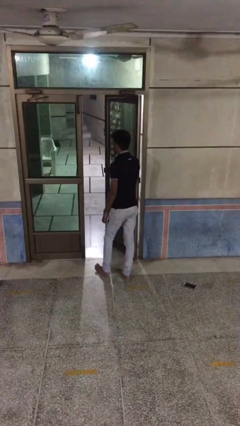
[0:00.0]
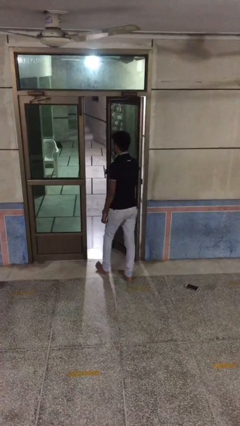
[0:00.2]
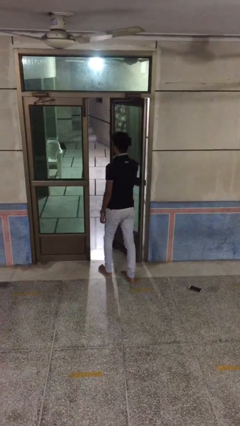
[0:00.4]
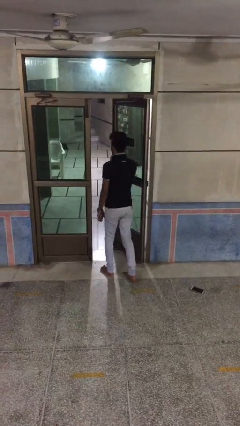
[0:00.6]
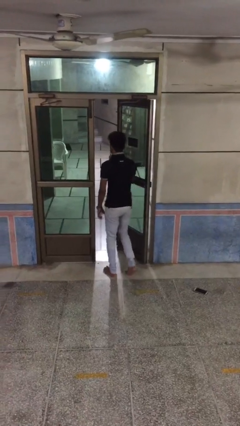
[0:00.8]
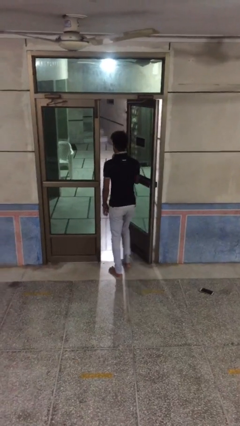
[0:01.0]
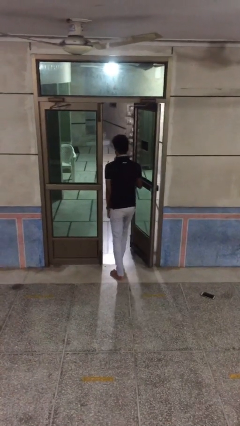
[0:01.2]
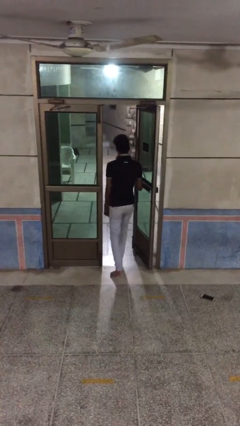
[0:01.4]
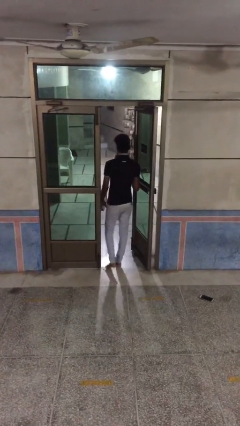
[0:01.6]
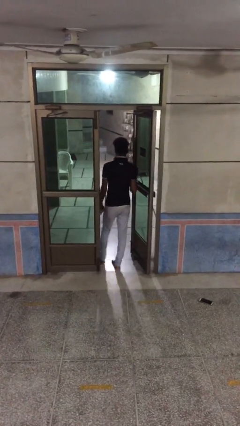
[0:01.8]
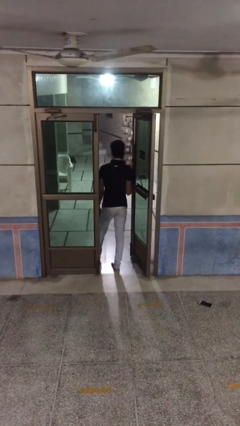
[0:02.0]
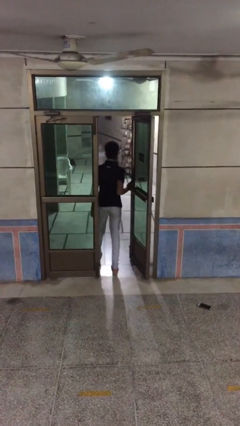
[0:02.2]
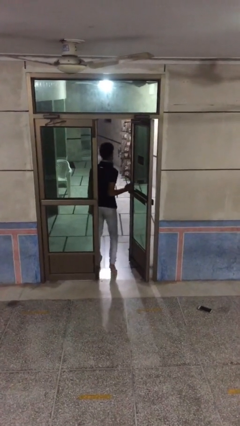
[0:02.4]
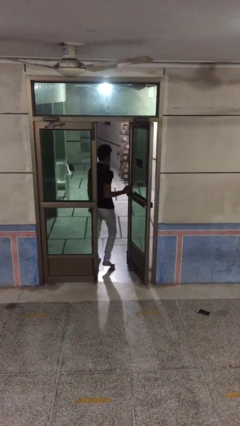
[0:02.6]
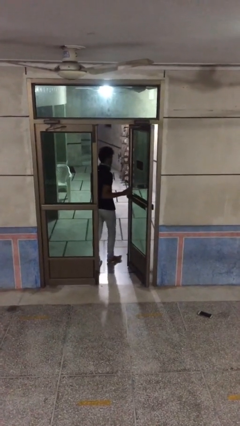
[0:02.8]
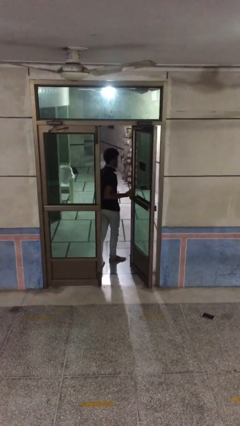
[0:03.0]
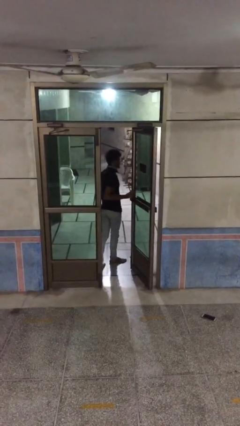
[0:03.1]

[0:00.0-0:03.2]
person exits scene through structure

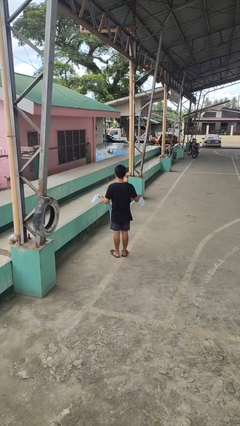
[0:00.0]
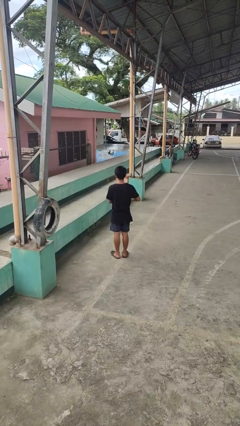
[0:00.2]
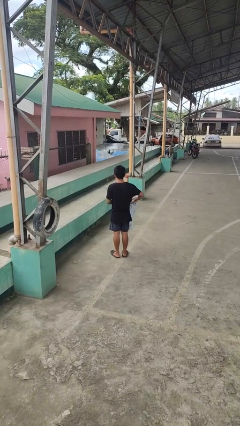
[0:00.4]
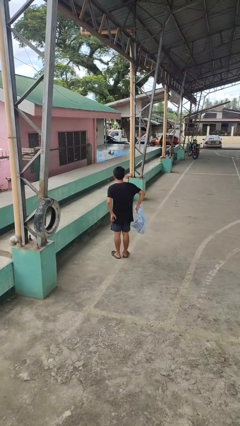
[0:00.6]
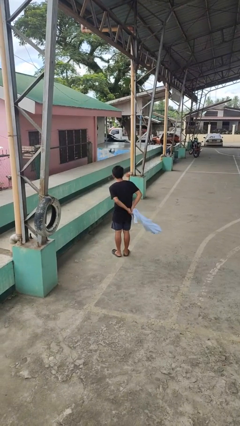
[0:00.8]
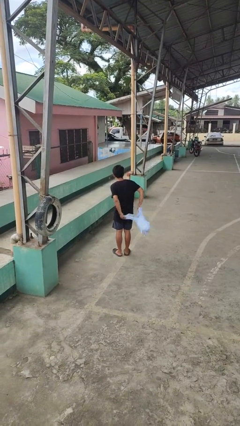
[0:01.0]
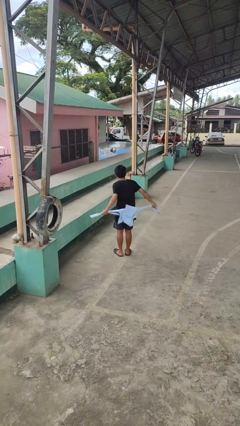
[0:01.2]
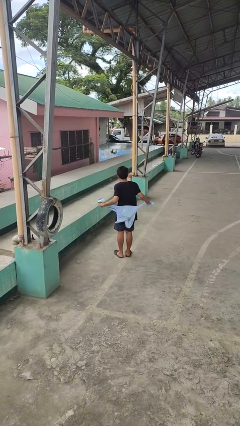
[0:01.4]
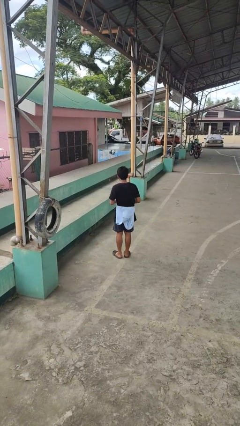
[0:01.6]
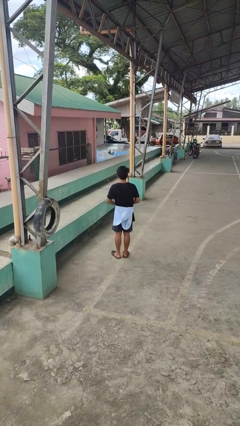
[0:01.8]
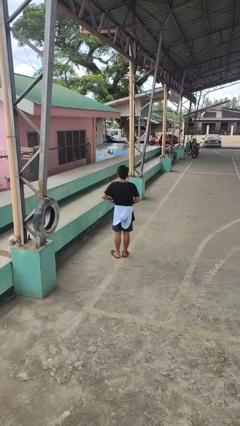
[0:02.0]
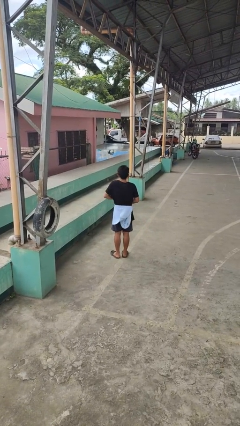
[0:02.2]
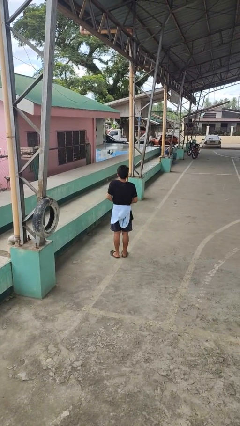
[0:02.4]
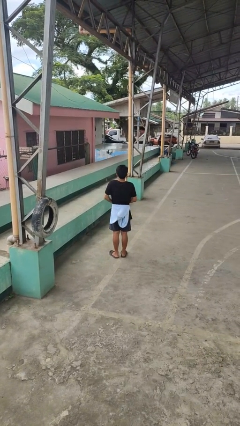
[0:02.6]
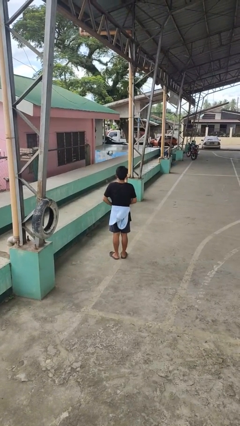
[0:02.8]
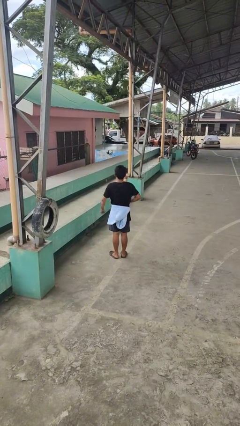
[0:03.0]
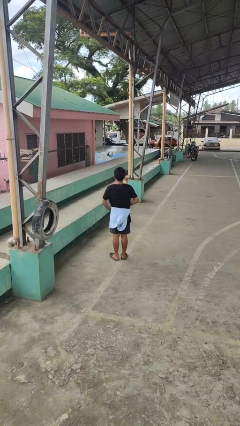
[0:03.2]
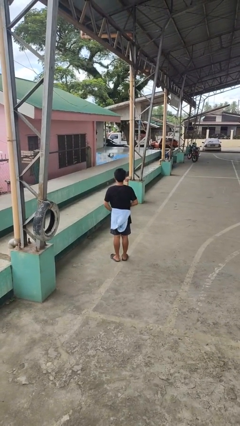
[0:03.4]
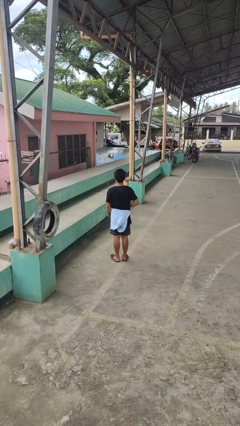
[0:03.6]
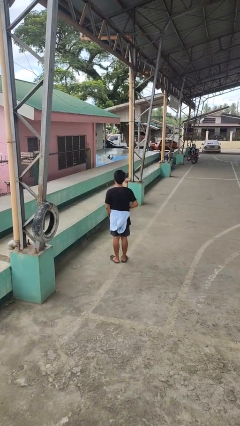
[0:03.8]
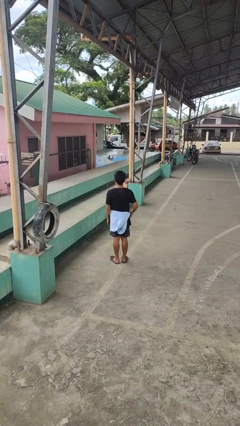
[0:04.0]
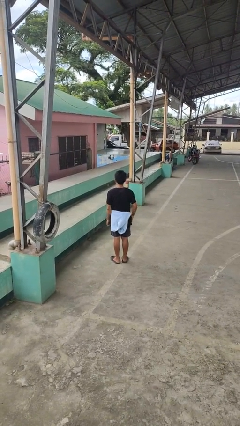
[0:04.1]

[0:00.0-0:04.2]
person ties jacket around waist

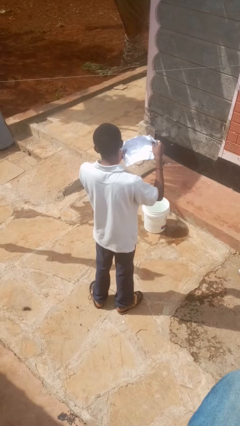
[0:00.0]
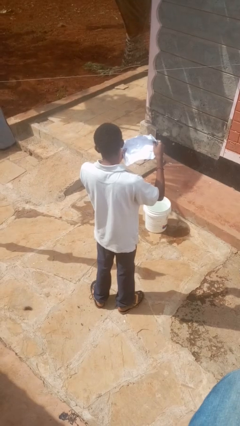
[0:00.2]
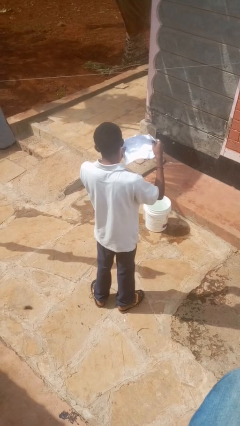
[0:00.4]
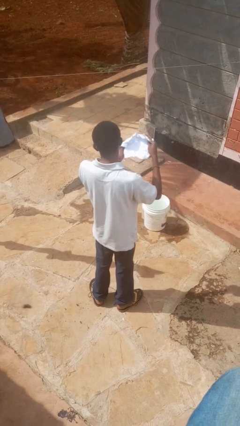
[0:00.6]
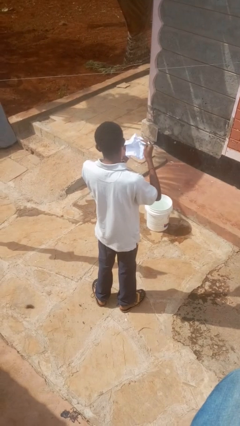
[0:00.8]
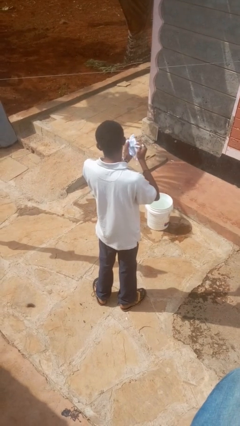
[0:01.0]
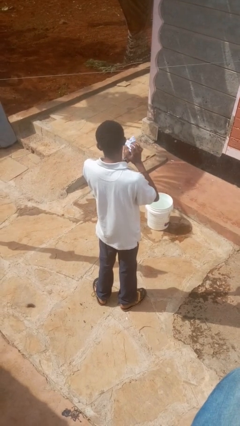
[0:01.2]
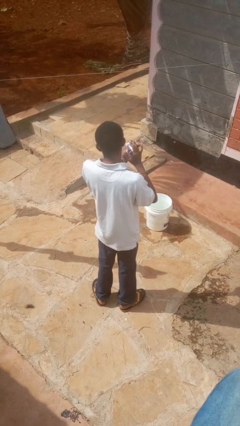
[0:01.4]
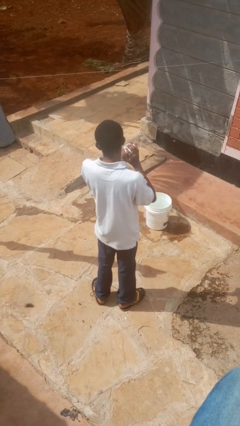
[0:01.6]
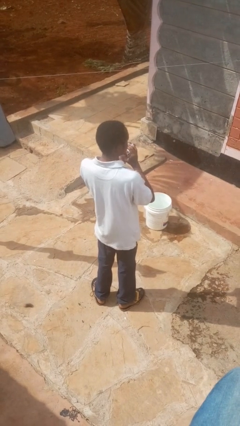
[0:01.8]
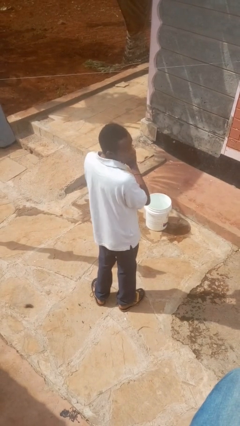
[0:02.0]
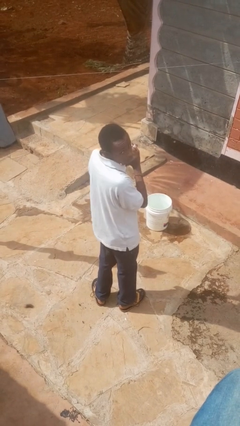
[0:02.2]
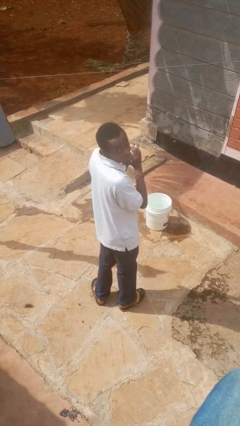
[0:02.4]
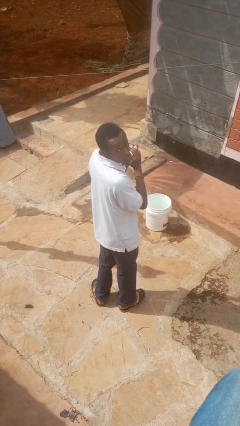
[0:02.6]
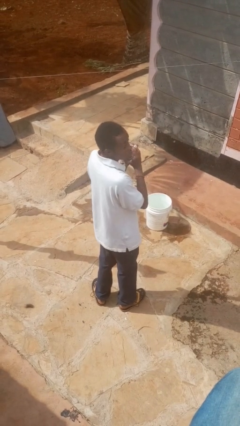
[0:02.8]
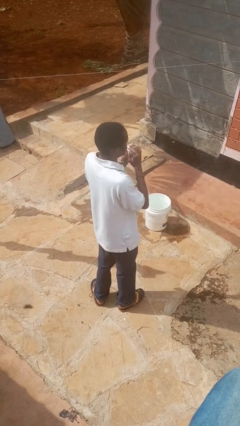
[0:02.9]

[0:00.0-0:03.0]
person crumples paper

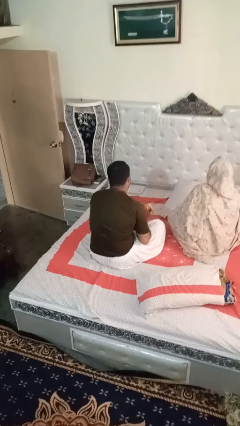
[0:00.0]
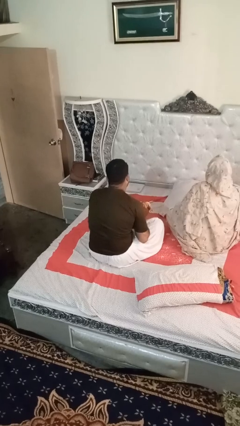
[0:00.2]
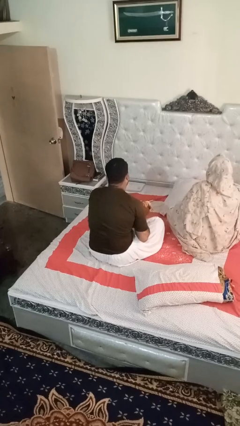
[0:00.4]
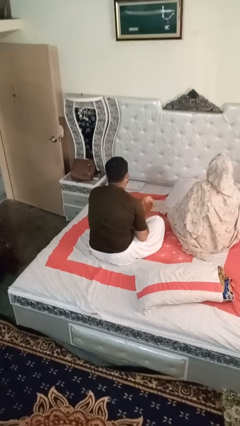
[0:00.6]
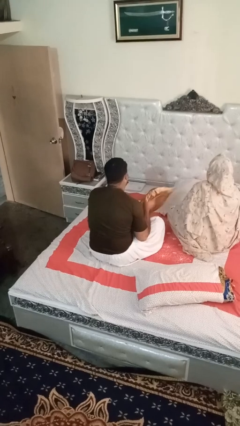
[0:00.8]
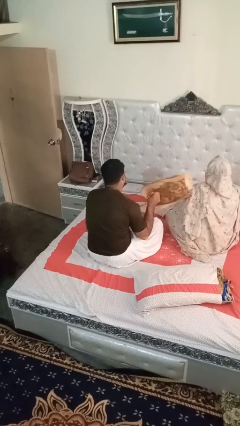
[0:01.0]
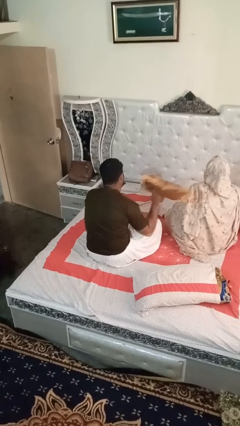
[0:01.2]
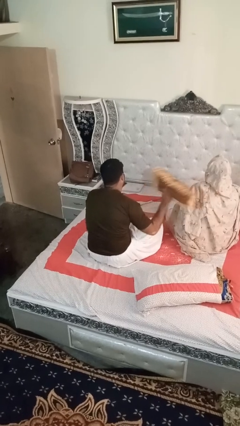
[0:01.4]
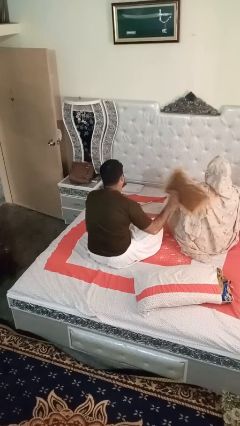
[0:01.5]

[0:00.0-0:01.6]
person hits person with pillow

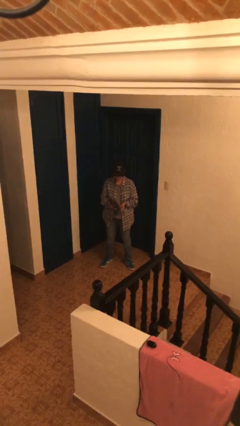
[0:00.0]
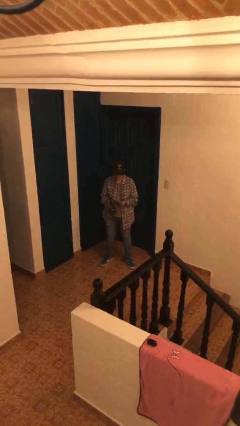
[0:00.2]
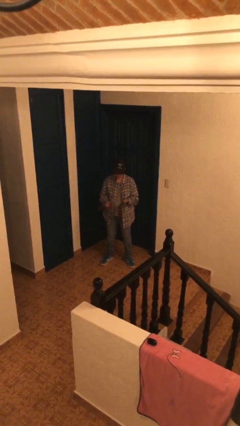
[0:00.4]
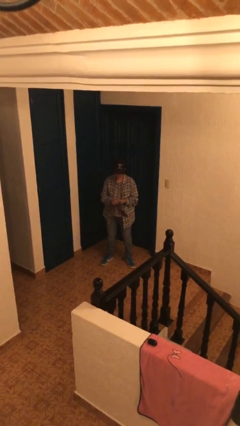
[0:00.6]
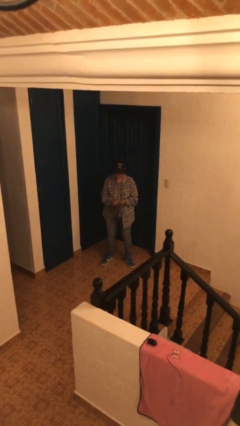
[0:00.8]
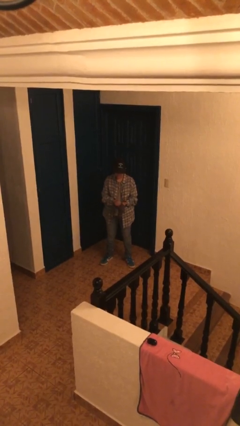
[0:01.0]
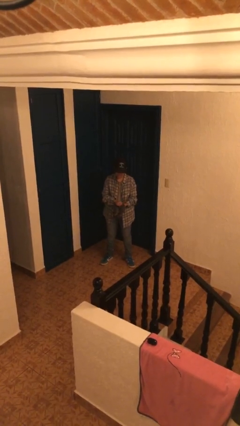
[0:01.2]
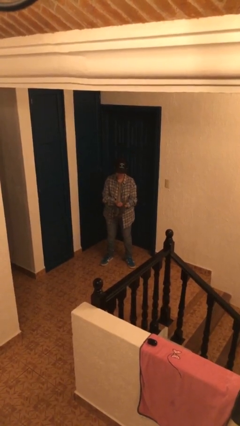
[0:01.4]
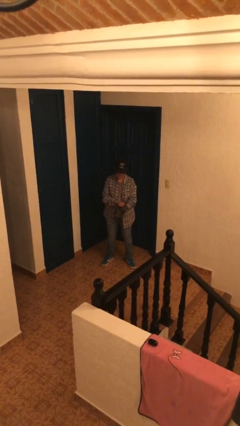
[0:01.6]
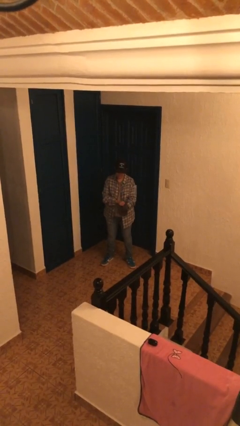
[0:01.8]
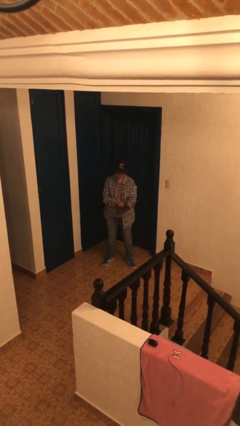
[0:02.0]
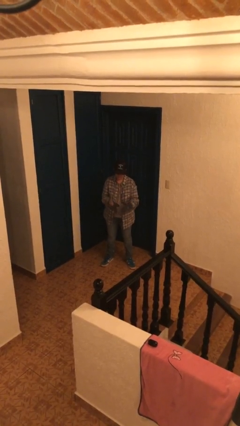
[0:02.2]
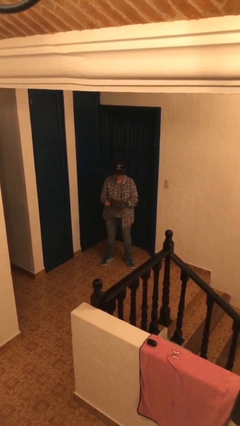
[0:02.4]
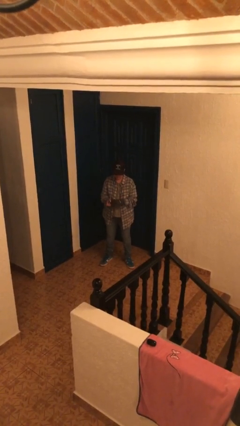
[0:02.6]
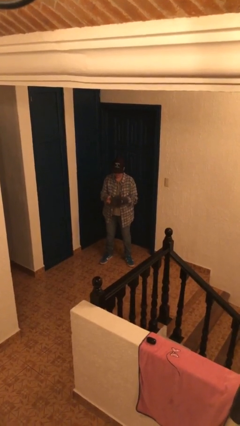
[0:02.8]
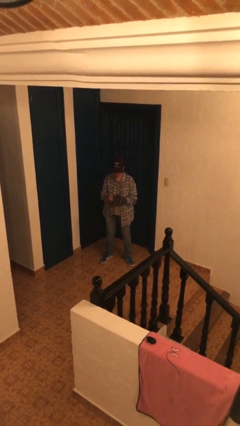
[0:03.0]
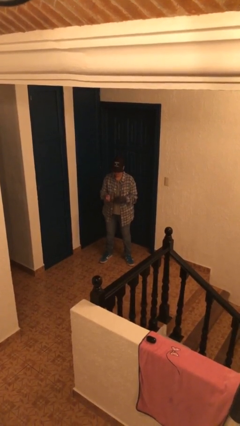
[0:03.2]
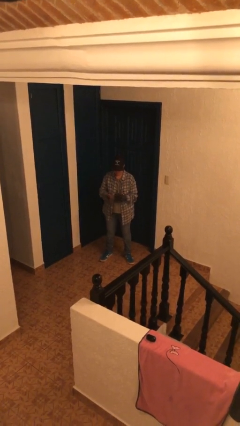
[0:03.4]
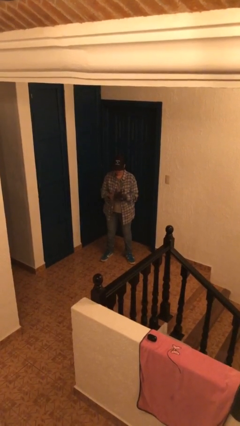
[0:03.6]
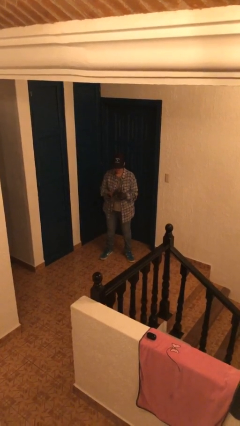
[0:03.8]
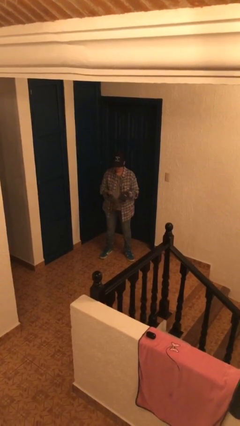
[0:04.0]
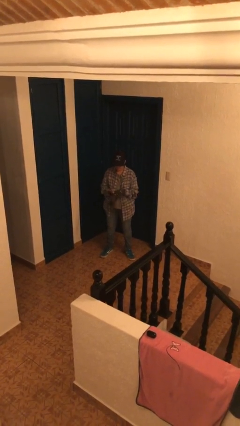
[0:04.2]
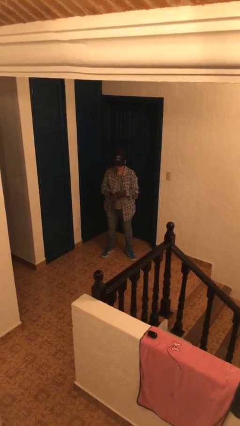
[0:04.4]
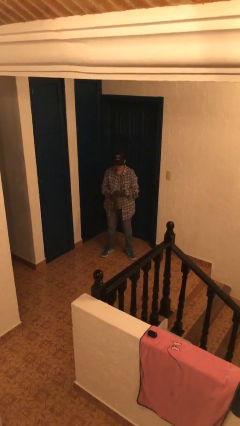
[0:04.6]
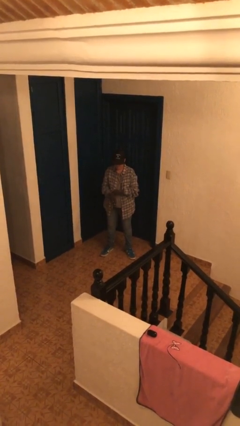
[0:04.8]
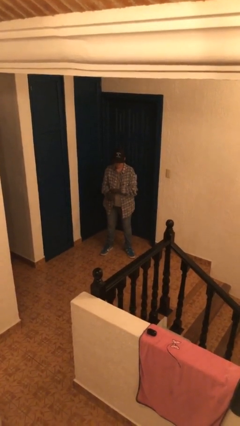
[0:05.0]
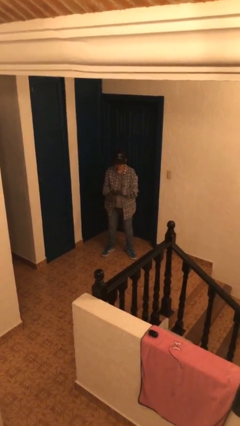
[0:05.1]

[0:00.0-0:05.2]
person puts on gloves
